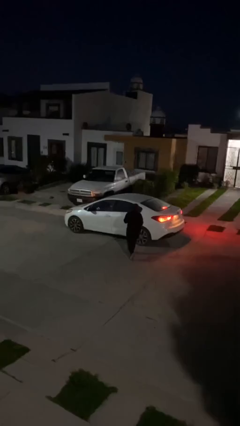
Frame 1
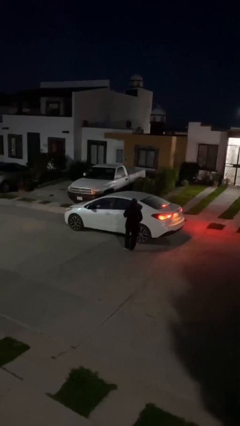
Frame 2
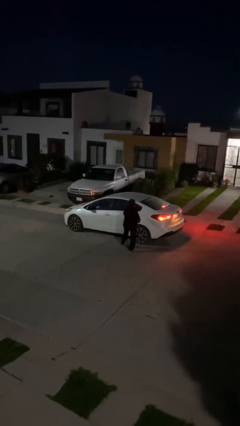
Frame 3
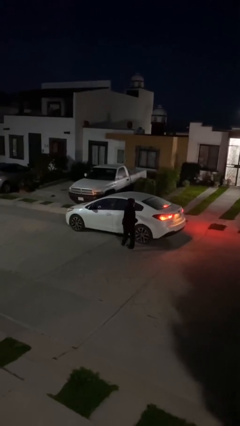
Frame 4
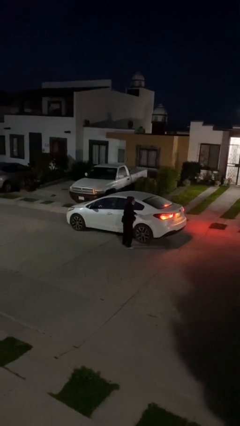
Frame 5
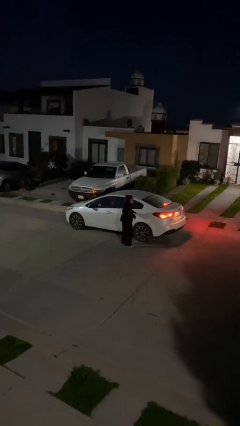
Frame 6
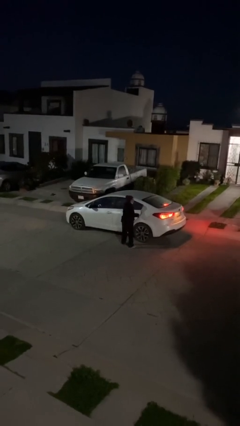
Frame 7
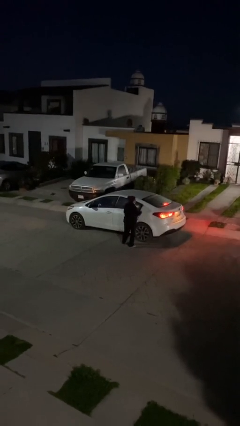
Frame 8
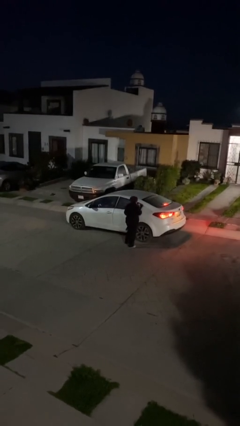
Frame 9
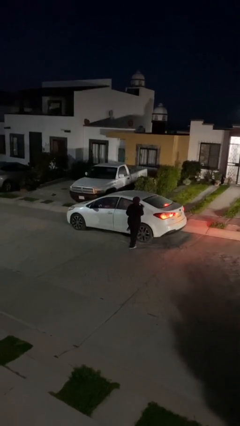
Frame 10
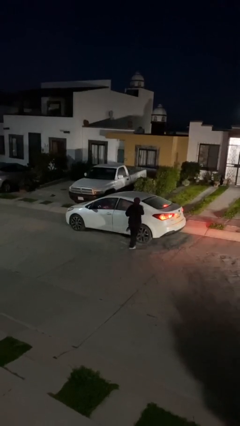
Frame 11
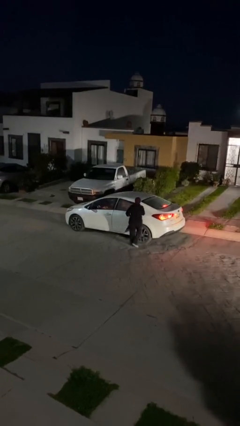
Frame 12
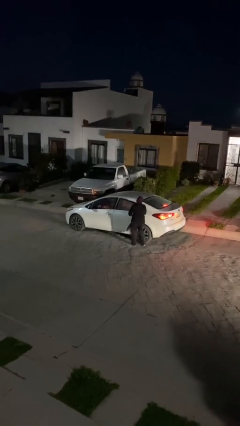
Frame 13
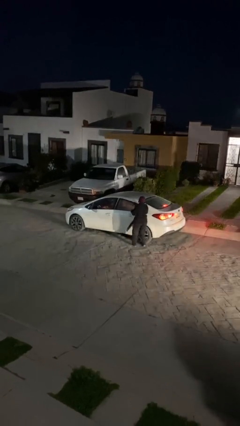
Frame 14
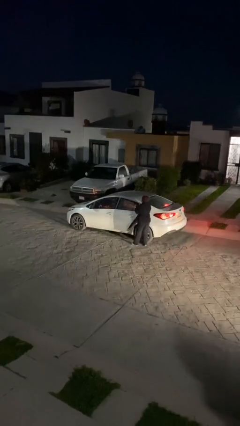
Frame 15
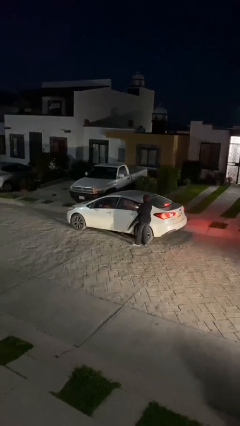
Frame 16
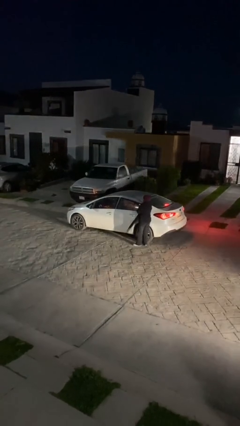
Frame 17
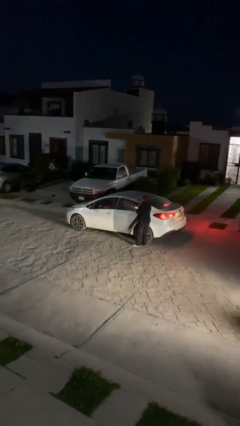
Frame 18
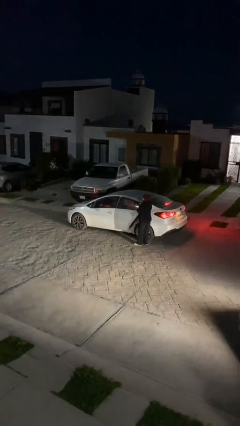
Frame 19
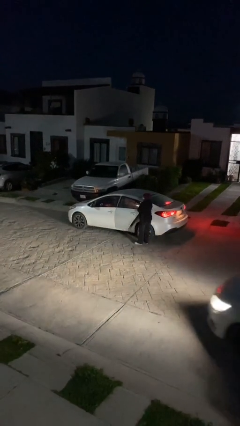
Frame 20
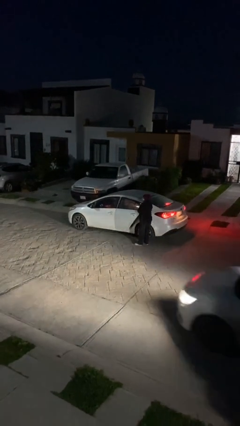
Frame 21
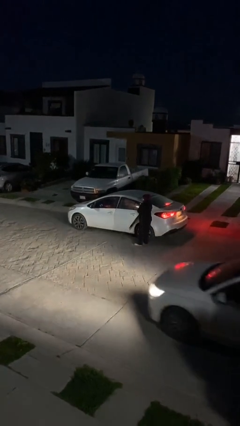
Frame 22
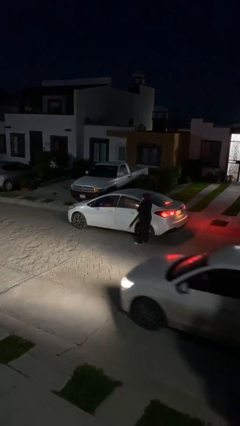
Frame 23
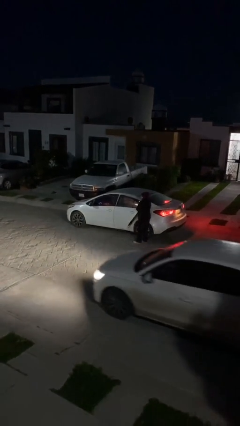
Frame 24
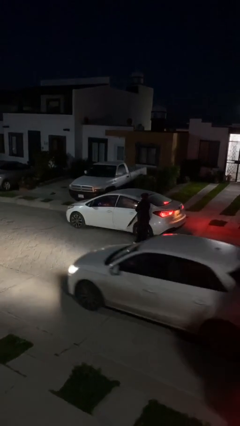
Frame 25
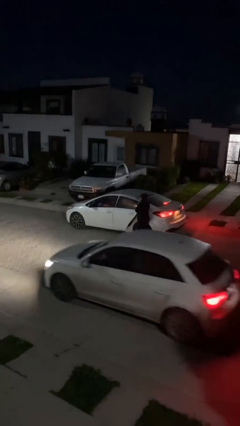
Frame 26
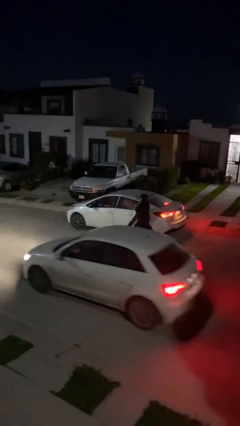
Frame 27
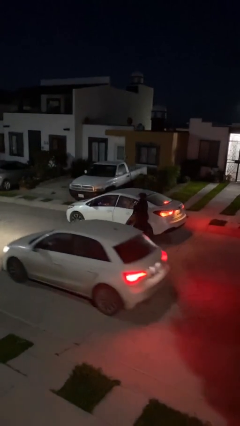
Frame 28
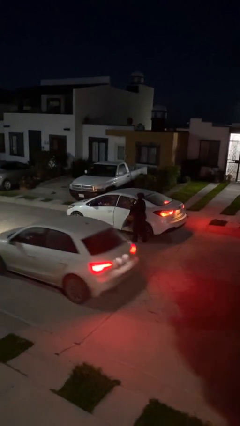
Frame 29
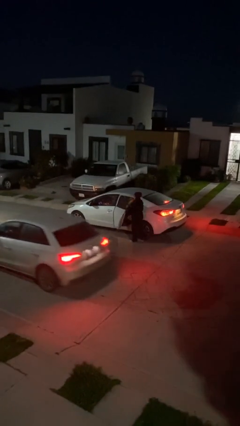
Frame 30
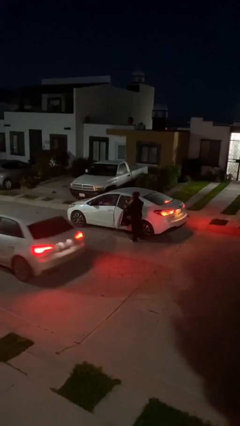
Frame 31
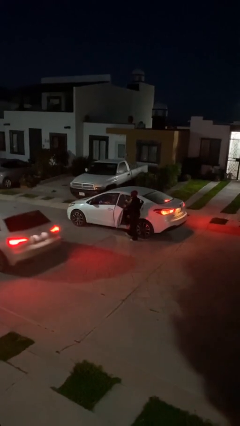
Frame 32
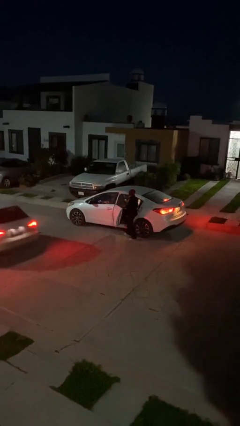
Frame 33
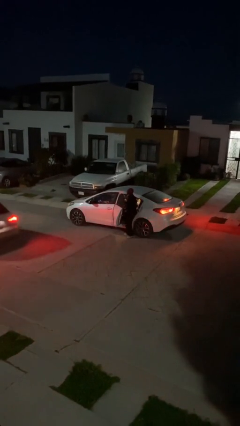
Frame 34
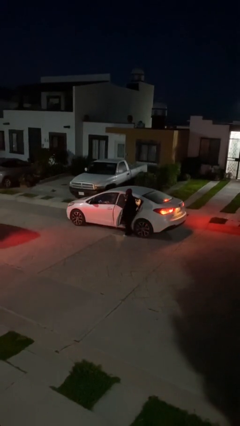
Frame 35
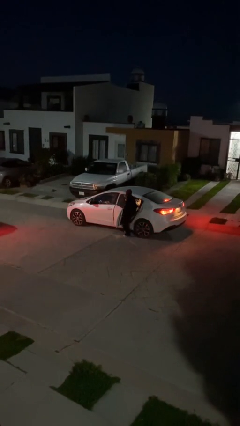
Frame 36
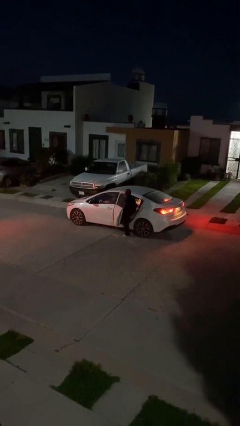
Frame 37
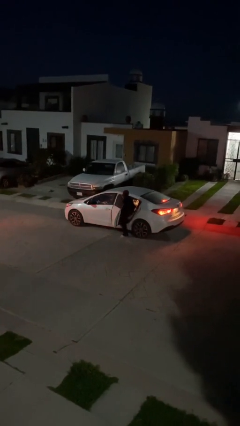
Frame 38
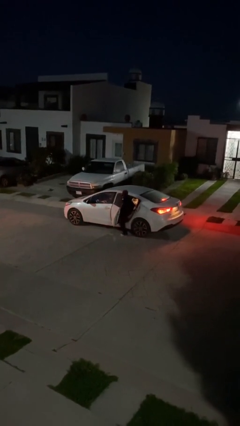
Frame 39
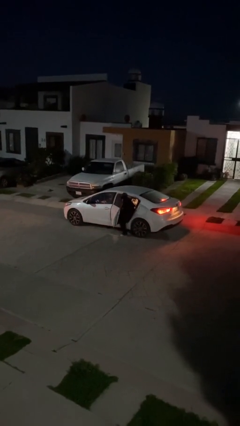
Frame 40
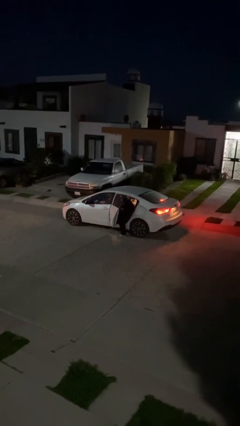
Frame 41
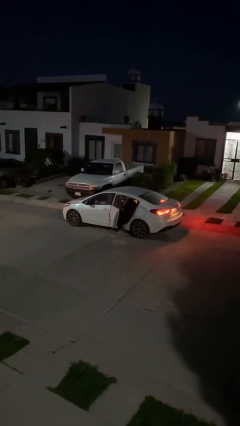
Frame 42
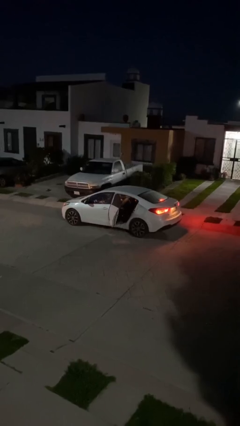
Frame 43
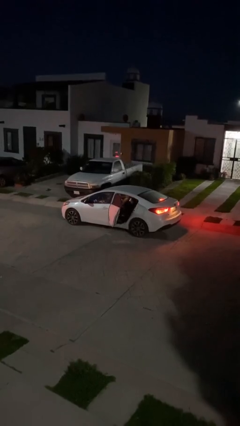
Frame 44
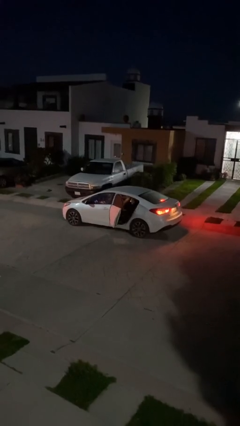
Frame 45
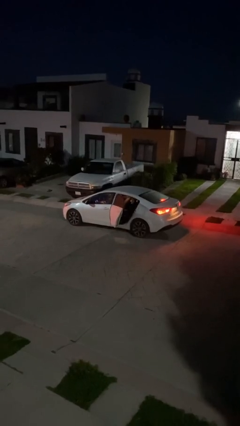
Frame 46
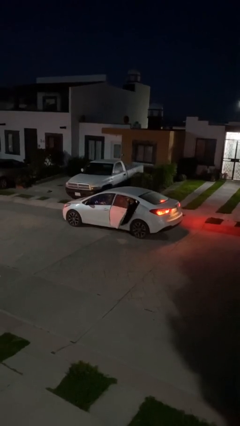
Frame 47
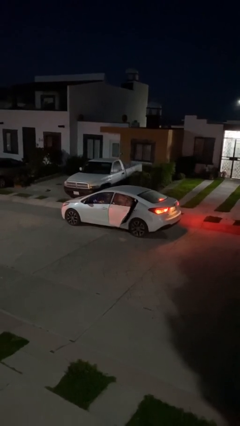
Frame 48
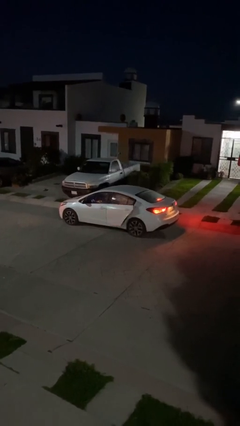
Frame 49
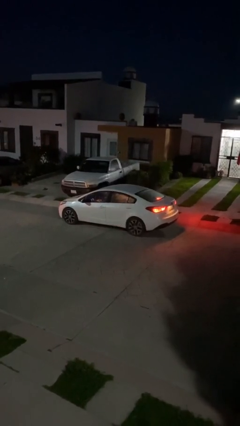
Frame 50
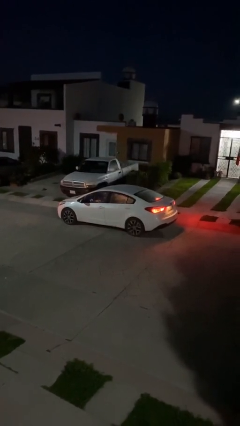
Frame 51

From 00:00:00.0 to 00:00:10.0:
car picks up person

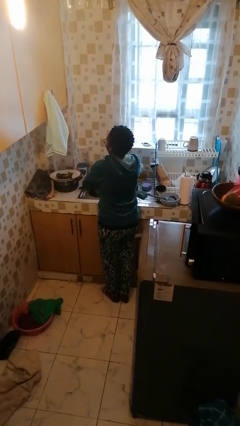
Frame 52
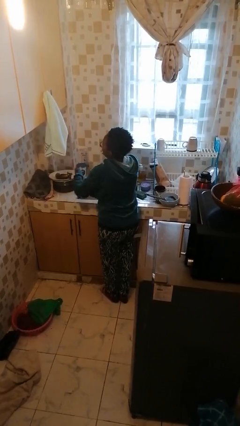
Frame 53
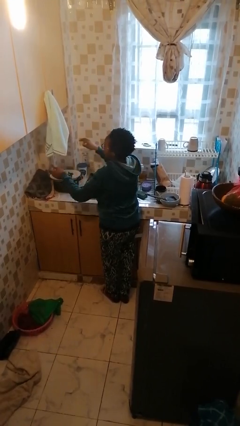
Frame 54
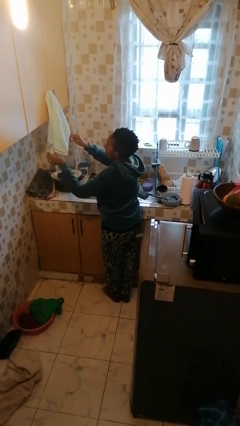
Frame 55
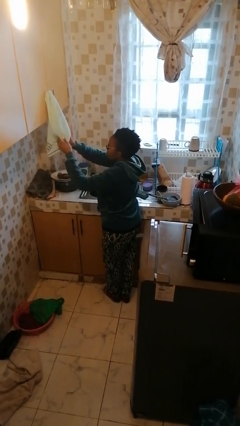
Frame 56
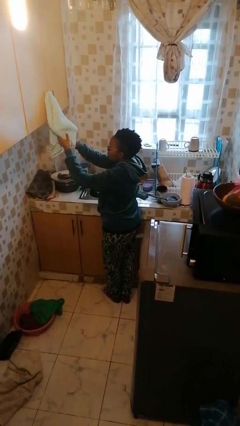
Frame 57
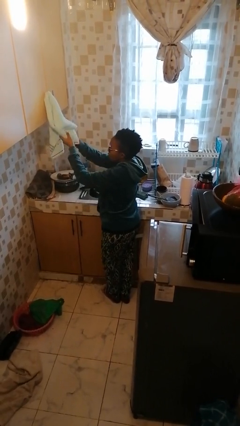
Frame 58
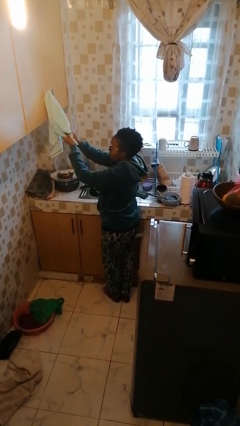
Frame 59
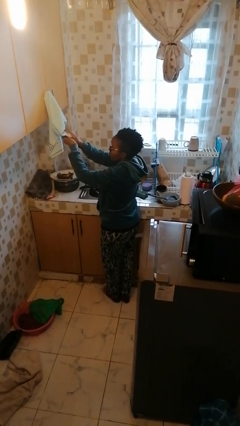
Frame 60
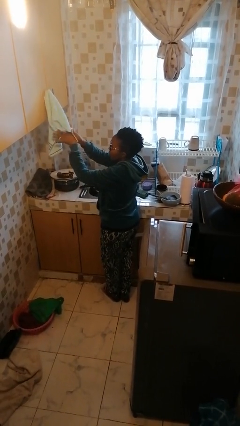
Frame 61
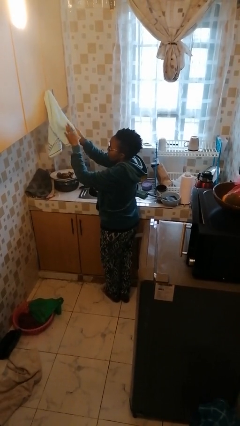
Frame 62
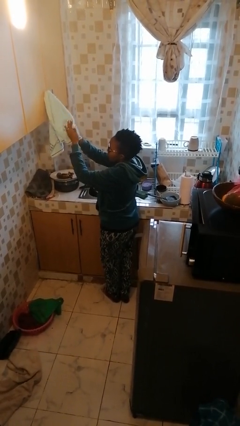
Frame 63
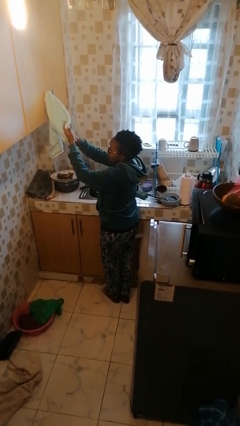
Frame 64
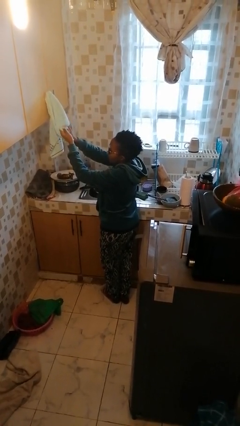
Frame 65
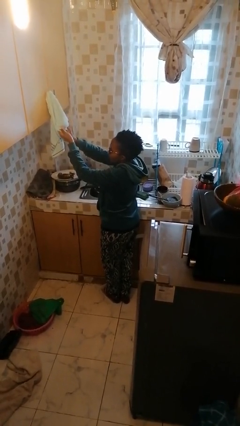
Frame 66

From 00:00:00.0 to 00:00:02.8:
person dries hands with towel

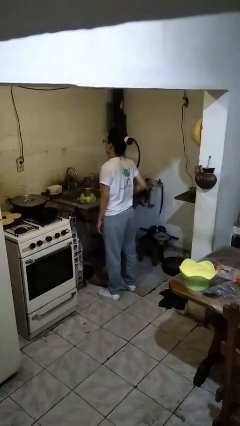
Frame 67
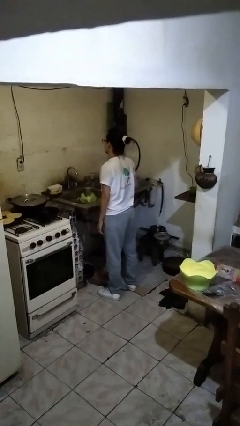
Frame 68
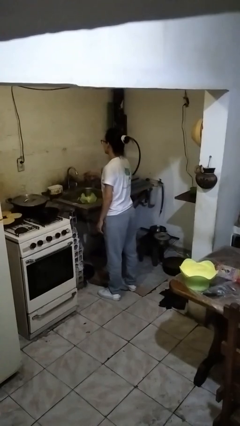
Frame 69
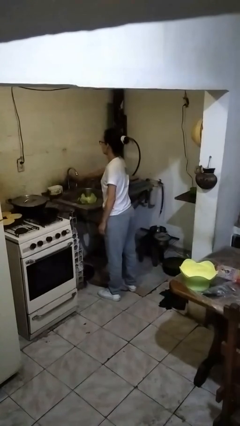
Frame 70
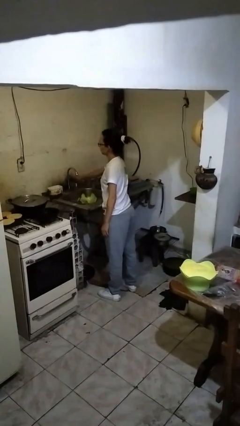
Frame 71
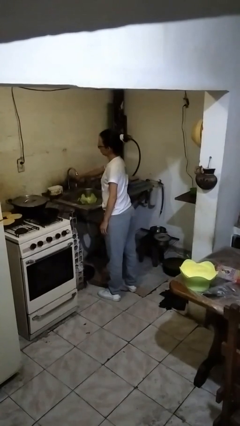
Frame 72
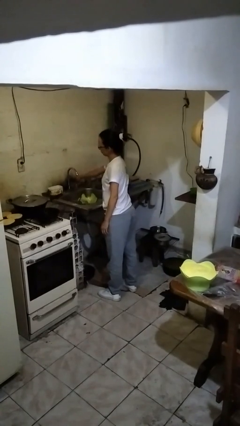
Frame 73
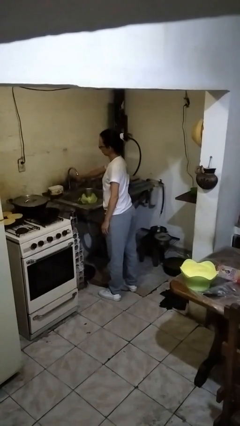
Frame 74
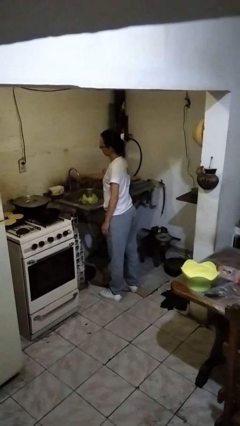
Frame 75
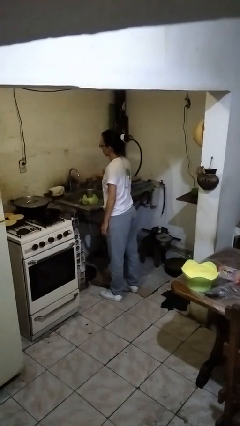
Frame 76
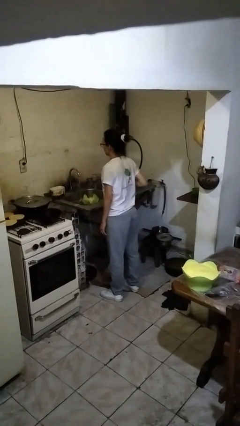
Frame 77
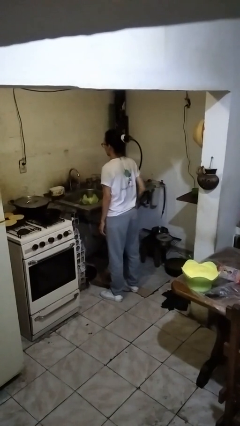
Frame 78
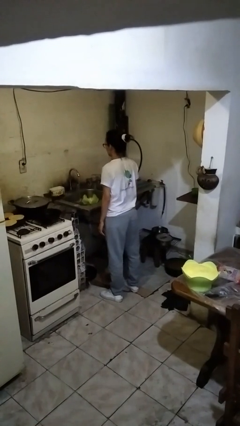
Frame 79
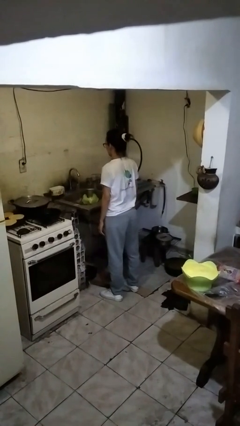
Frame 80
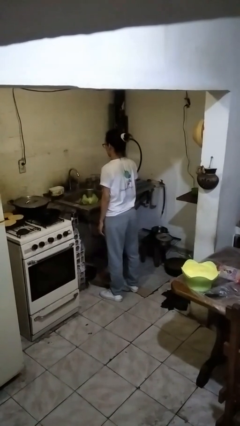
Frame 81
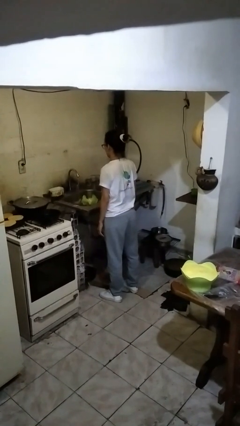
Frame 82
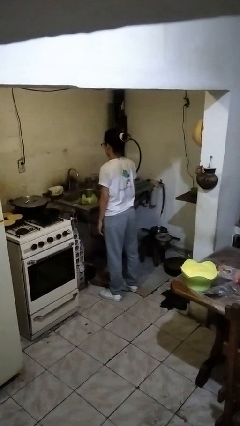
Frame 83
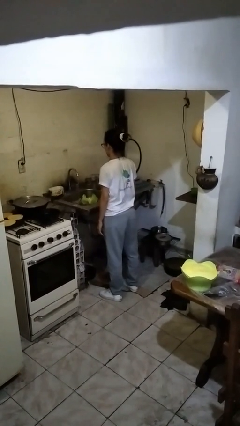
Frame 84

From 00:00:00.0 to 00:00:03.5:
person turns on faucet

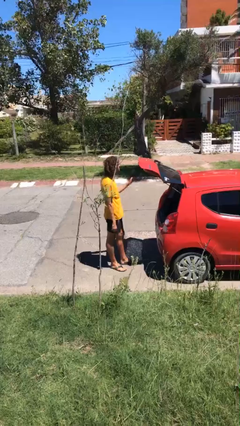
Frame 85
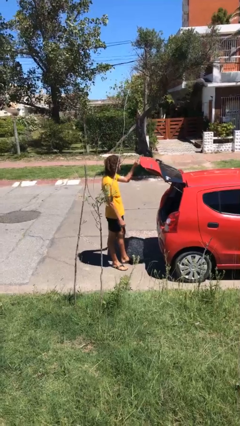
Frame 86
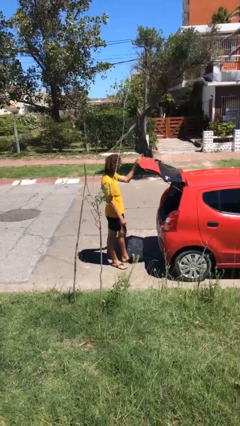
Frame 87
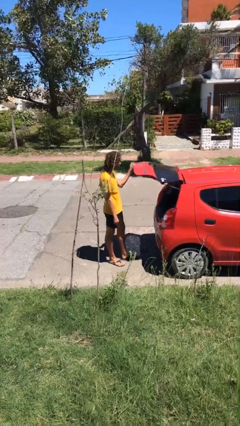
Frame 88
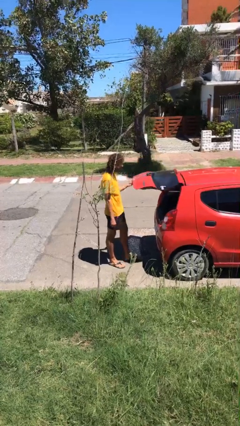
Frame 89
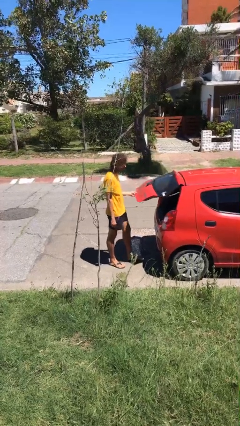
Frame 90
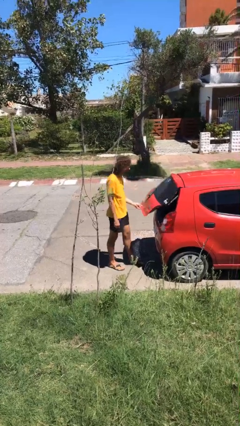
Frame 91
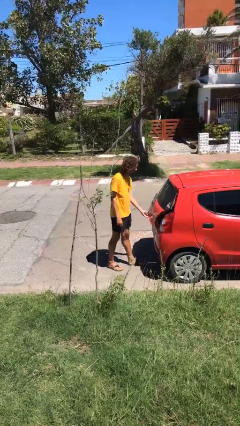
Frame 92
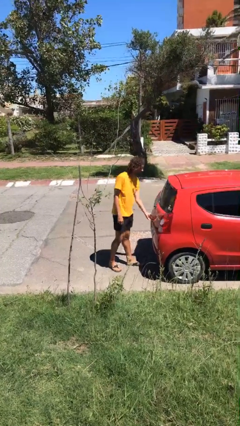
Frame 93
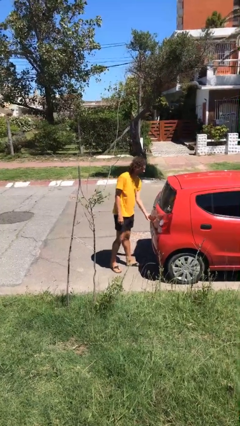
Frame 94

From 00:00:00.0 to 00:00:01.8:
person closes car trunk
